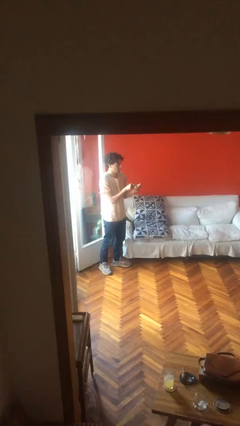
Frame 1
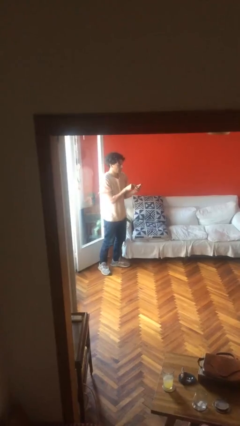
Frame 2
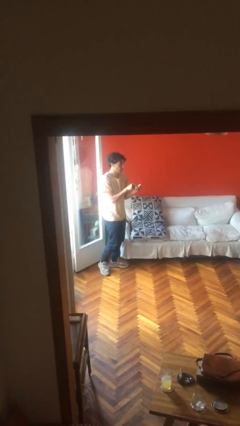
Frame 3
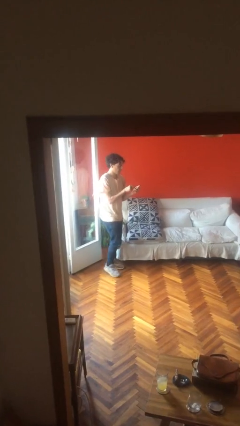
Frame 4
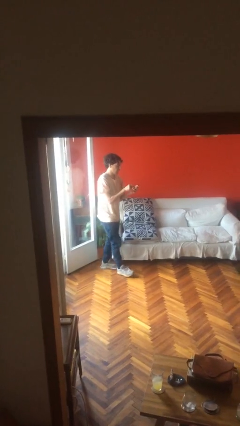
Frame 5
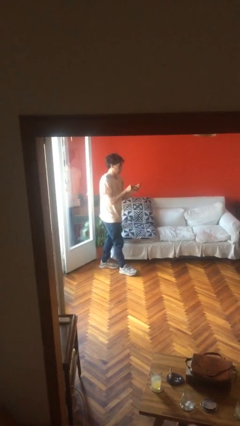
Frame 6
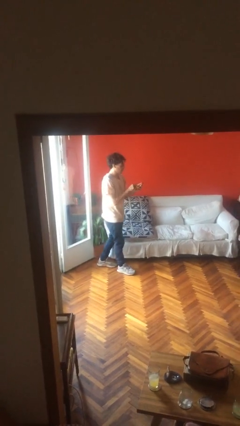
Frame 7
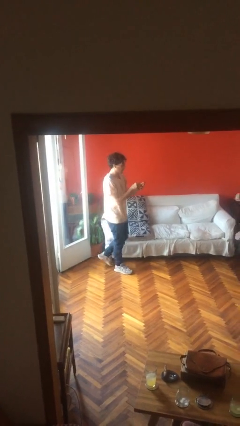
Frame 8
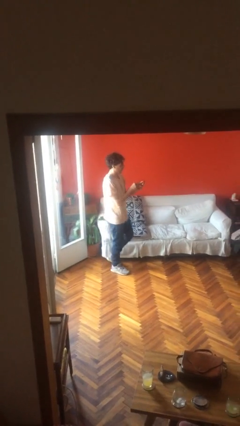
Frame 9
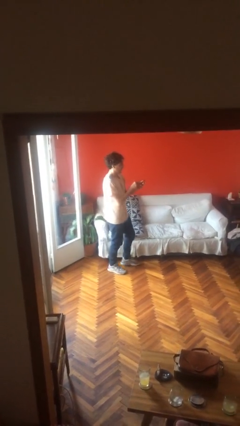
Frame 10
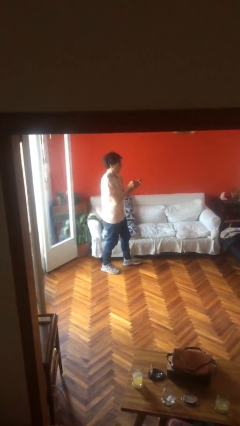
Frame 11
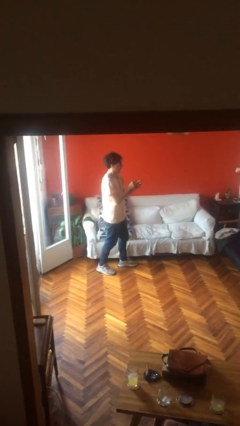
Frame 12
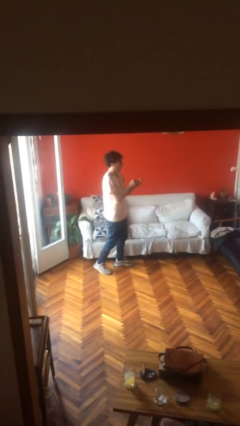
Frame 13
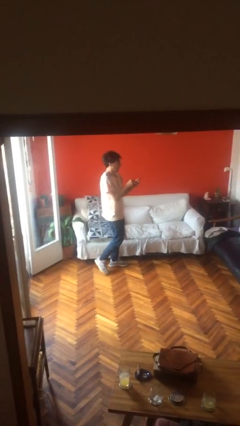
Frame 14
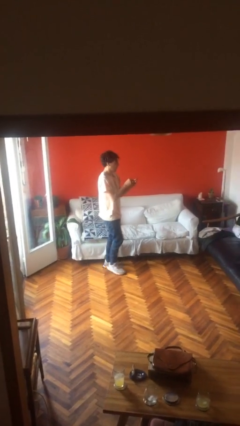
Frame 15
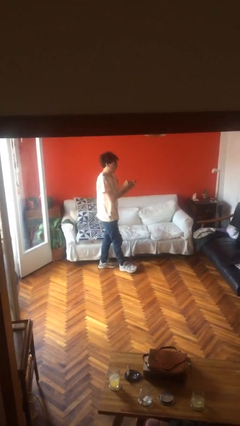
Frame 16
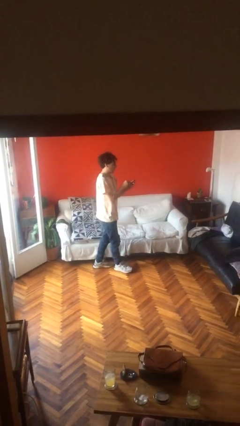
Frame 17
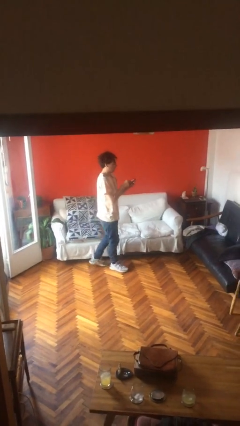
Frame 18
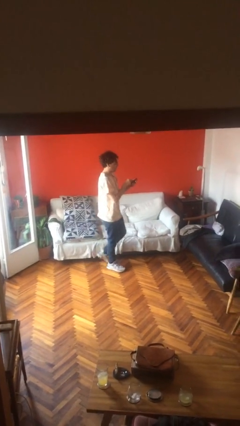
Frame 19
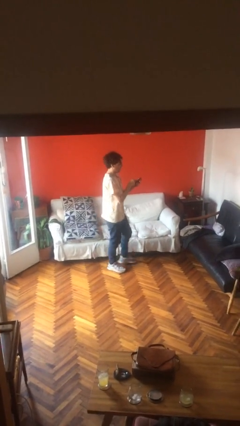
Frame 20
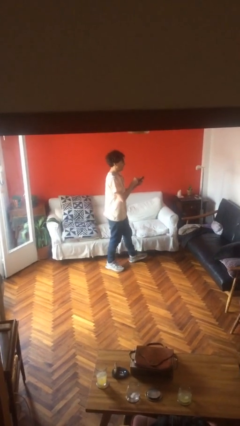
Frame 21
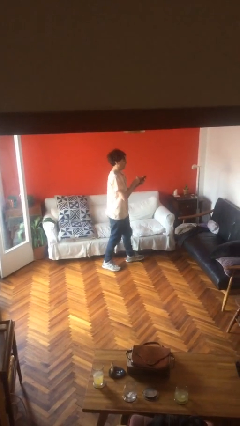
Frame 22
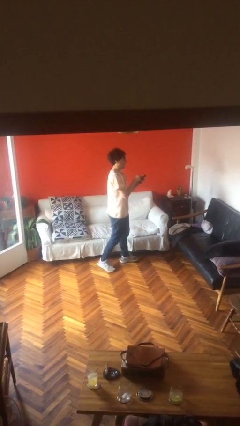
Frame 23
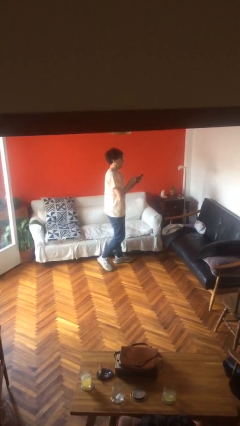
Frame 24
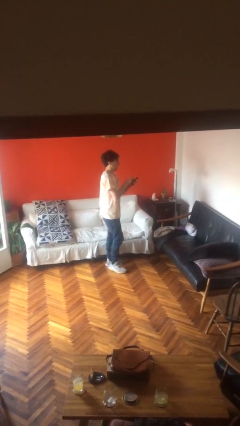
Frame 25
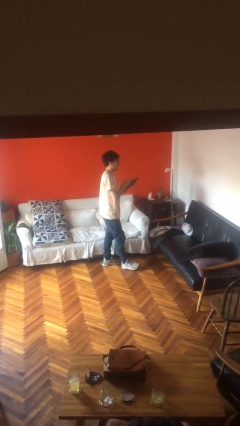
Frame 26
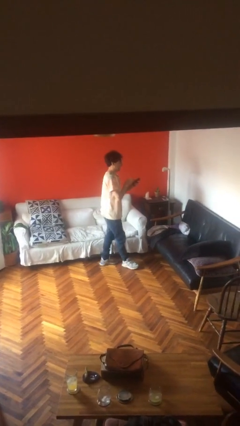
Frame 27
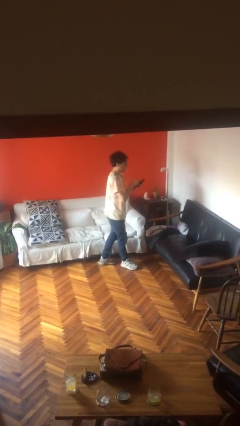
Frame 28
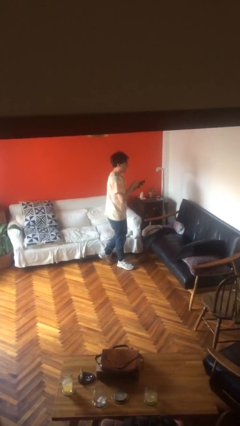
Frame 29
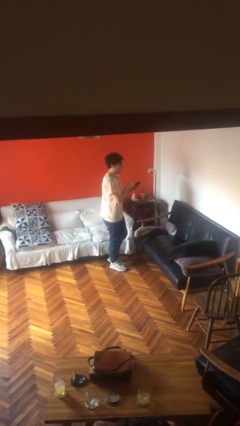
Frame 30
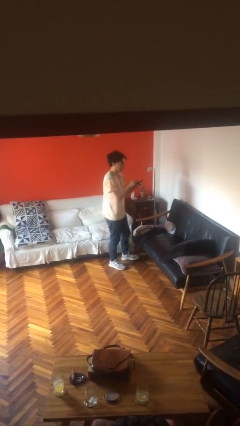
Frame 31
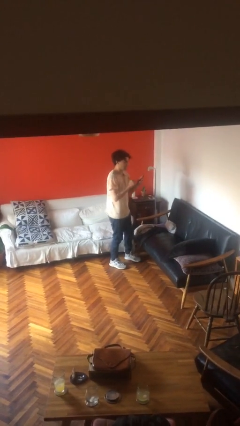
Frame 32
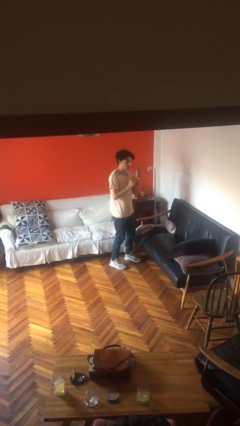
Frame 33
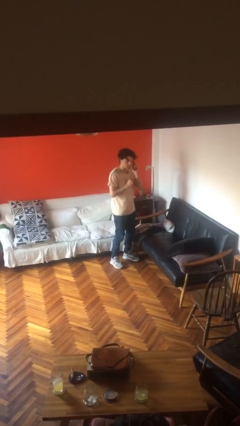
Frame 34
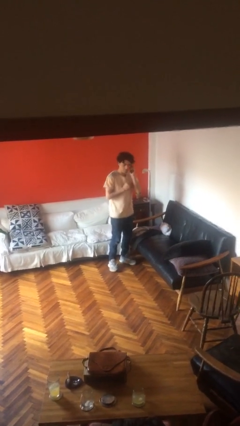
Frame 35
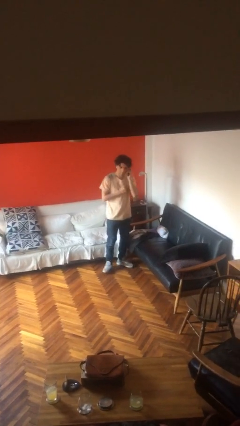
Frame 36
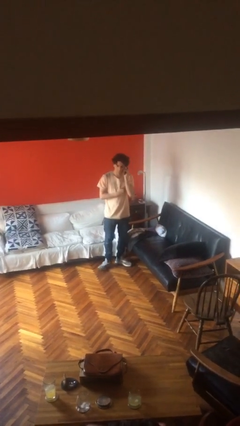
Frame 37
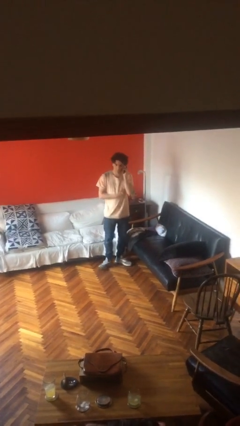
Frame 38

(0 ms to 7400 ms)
person texts on phone

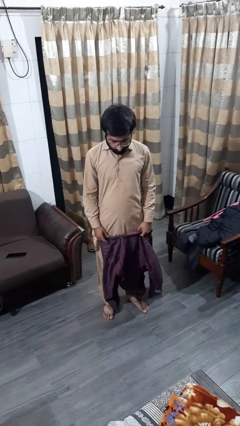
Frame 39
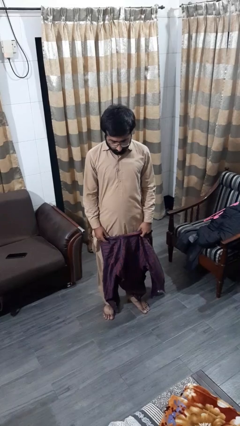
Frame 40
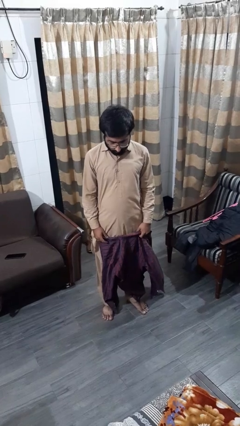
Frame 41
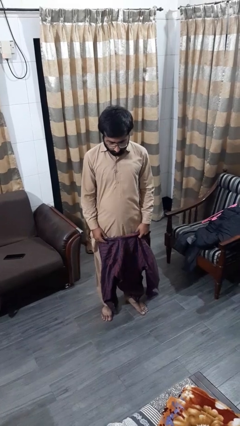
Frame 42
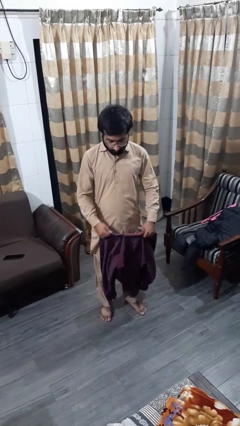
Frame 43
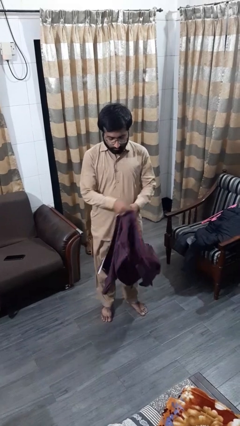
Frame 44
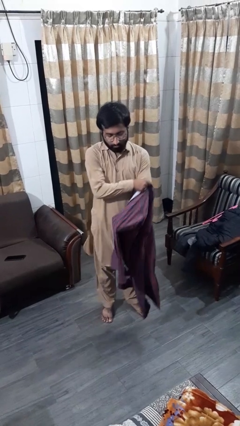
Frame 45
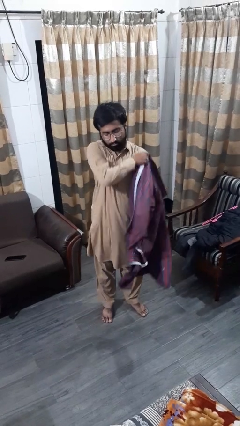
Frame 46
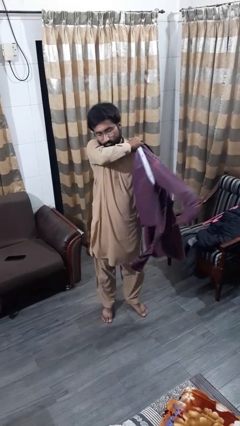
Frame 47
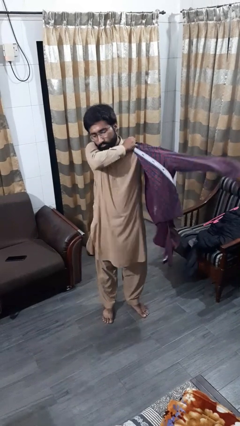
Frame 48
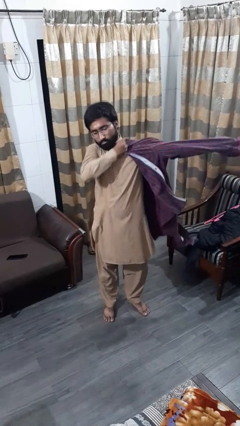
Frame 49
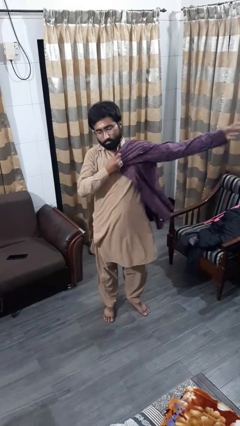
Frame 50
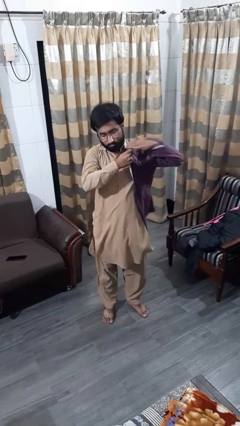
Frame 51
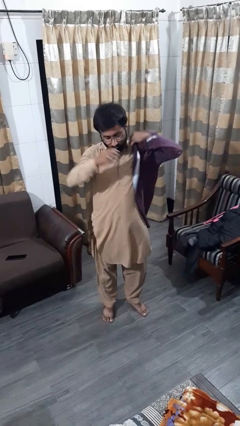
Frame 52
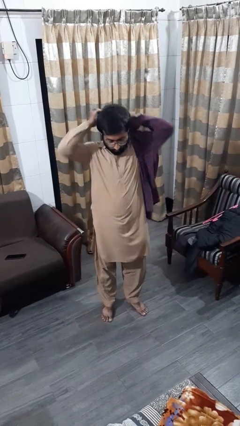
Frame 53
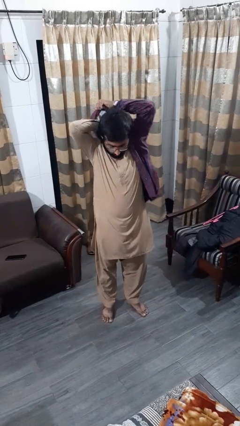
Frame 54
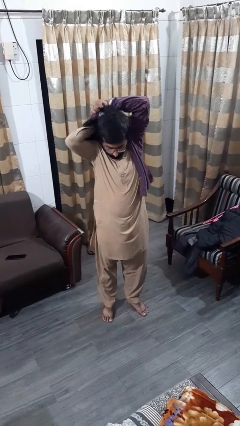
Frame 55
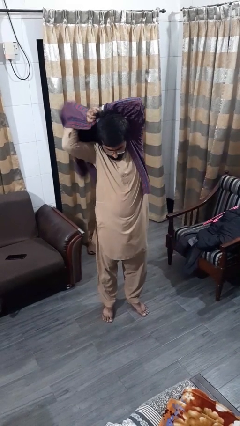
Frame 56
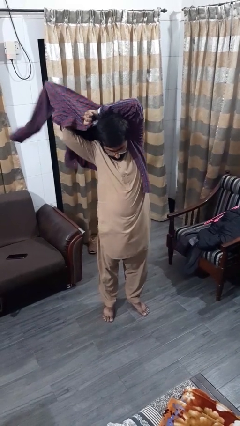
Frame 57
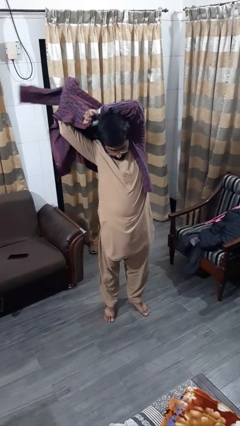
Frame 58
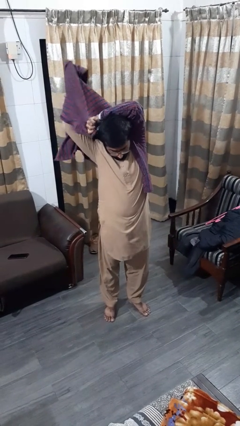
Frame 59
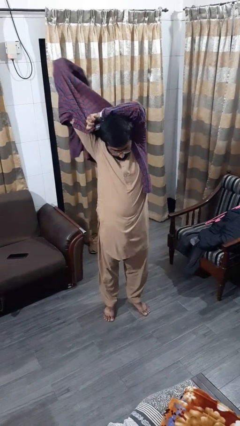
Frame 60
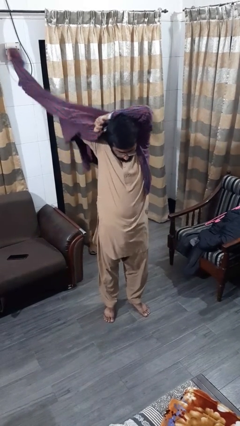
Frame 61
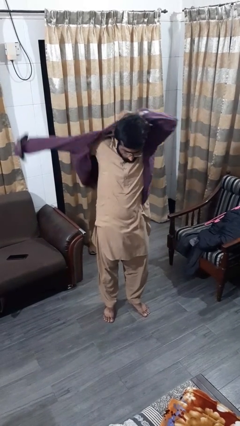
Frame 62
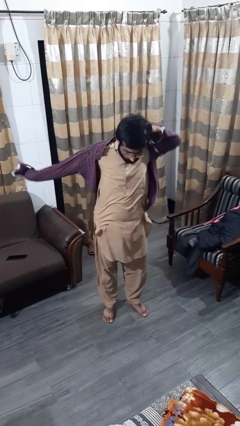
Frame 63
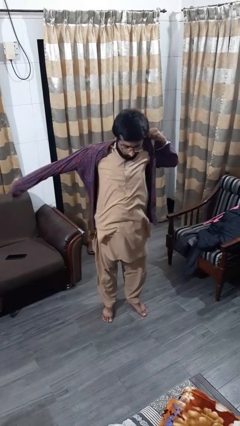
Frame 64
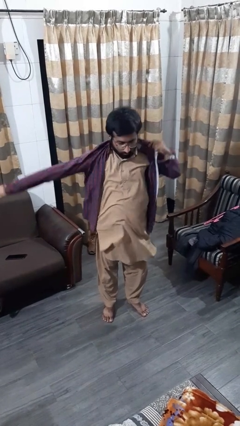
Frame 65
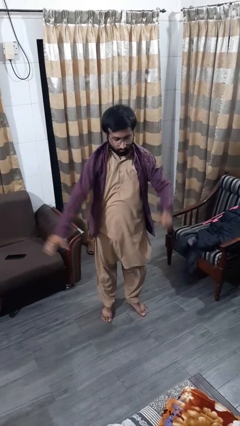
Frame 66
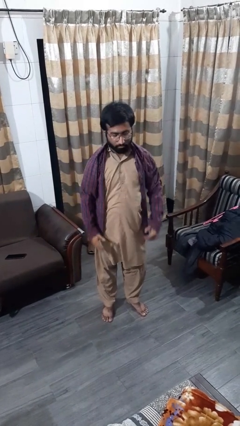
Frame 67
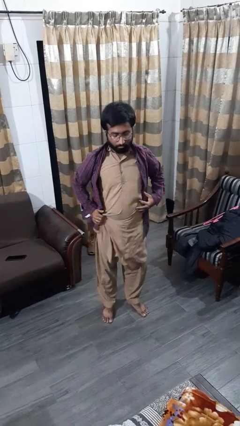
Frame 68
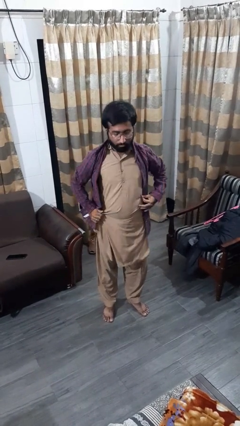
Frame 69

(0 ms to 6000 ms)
person puts on shirt

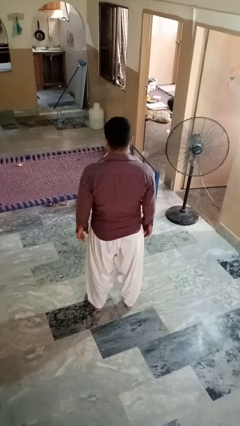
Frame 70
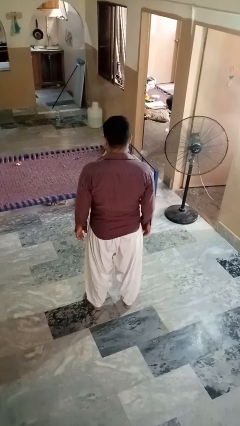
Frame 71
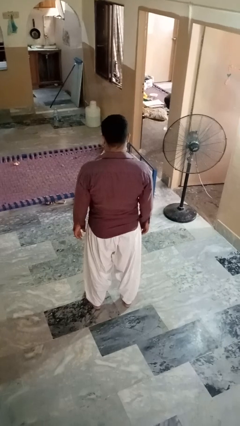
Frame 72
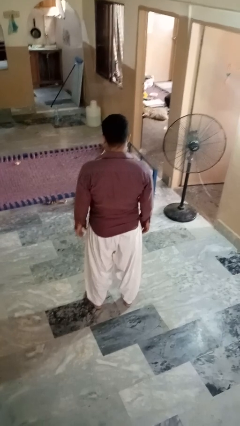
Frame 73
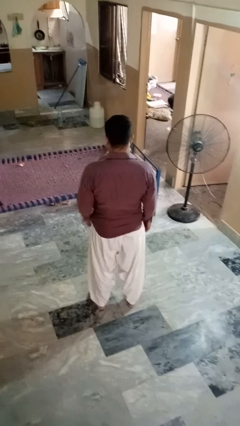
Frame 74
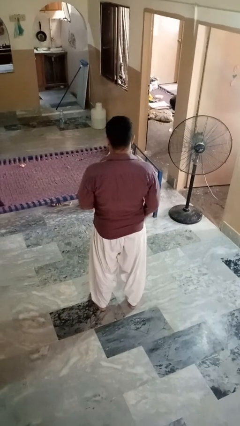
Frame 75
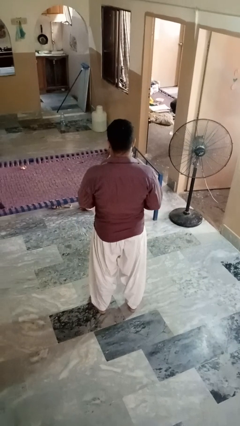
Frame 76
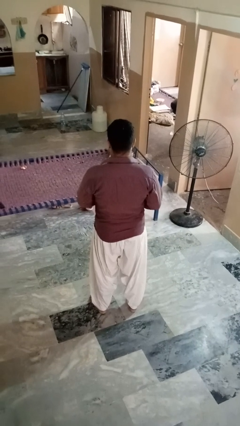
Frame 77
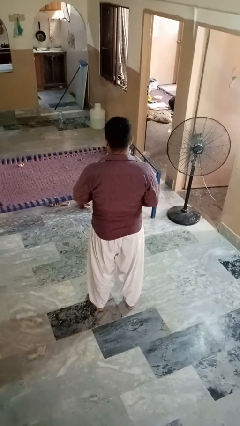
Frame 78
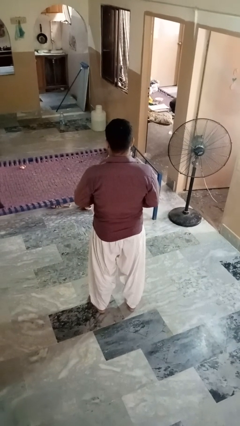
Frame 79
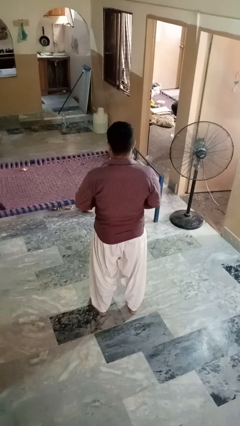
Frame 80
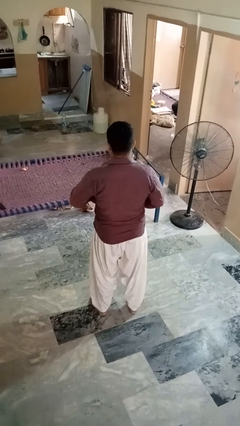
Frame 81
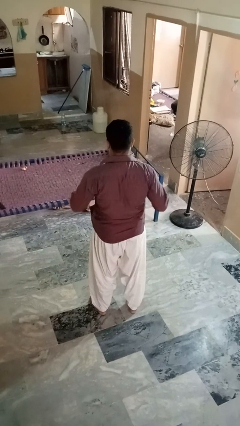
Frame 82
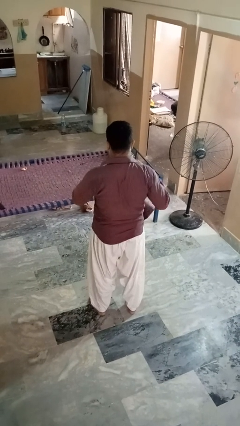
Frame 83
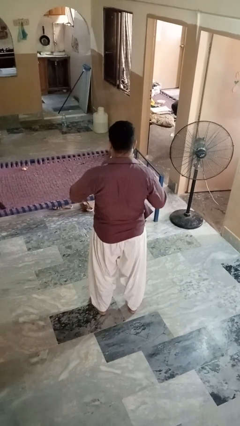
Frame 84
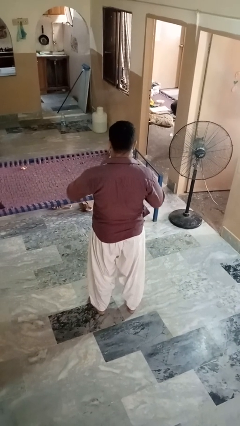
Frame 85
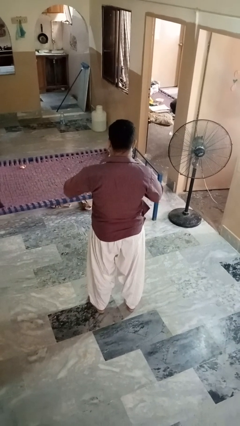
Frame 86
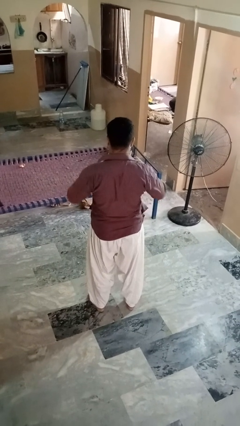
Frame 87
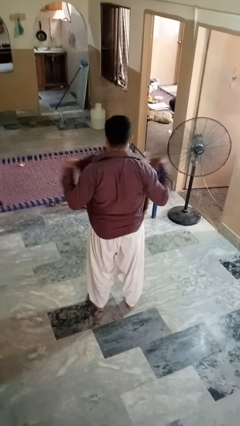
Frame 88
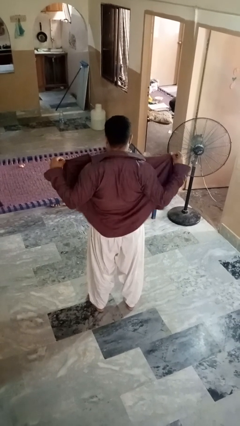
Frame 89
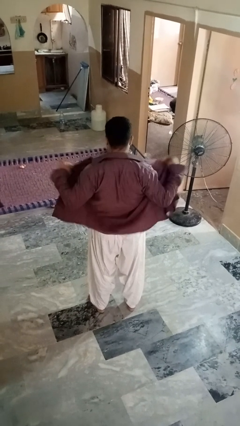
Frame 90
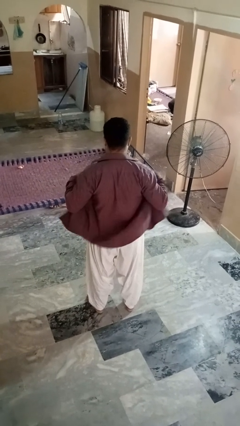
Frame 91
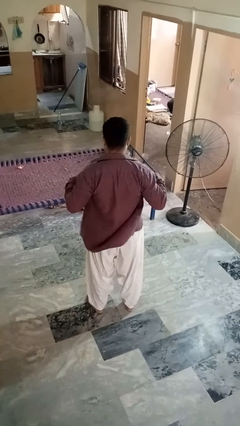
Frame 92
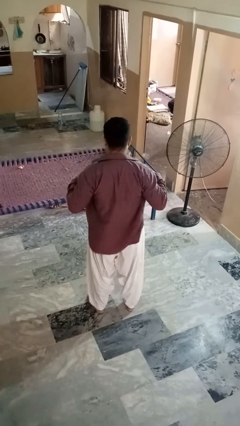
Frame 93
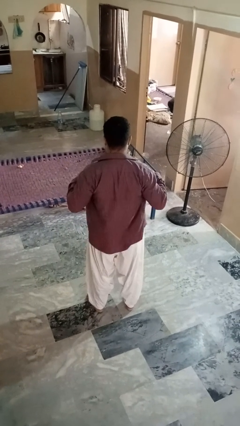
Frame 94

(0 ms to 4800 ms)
person unbuttons shirt

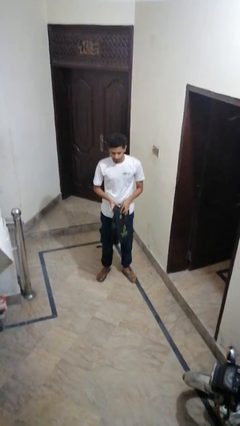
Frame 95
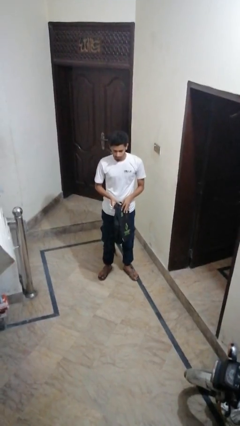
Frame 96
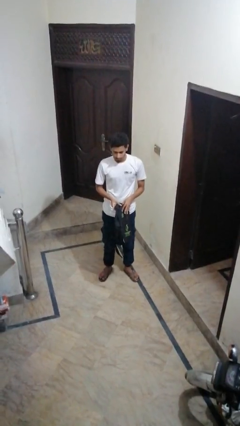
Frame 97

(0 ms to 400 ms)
person puts object into backpack
